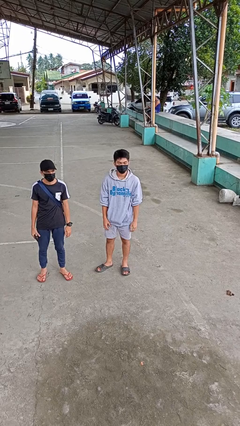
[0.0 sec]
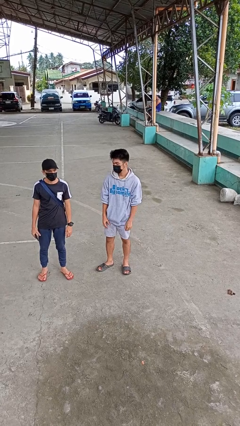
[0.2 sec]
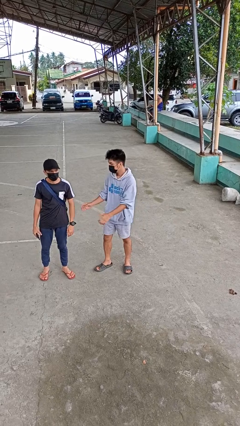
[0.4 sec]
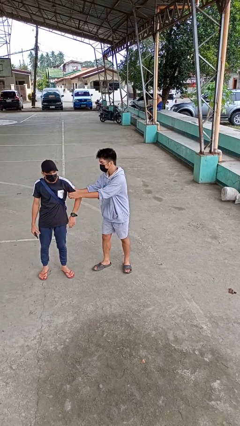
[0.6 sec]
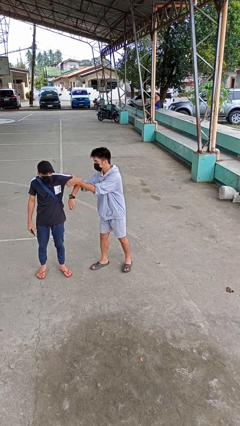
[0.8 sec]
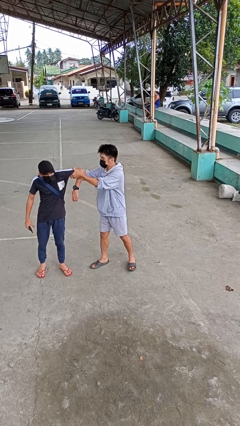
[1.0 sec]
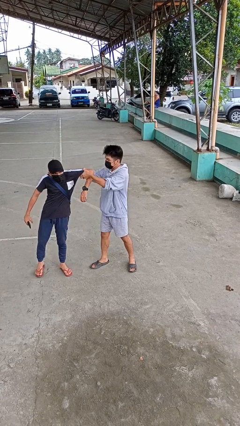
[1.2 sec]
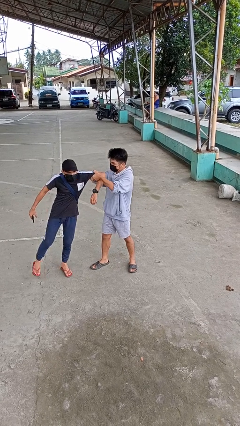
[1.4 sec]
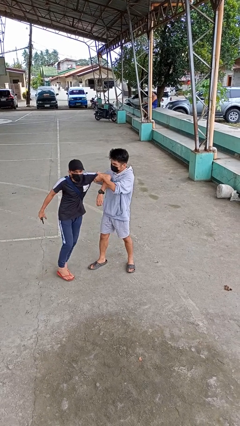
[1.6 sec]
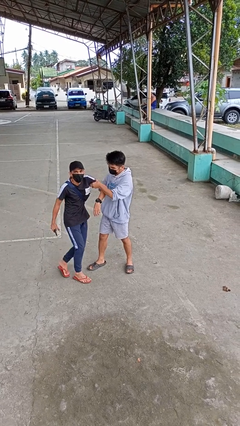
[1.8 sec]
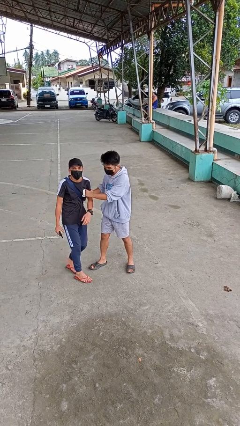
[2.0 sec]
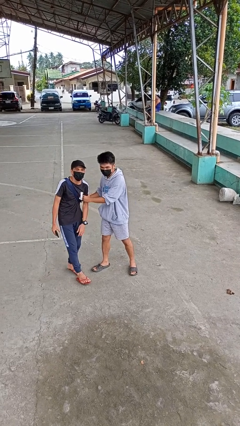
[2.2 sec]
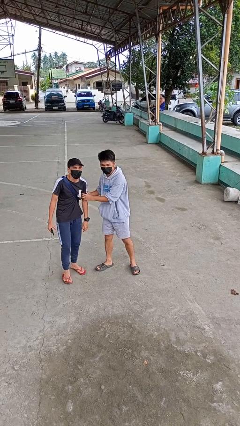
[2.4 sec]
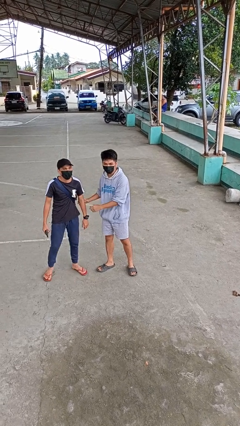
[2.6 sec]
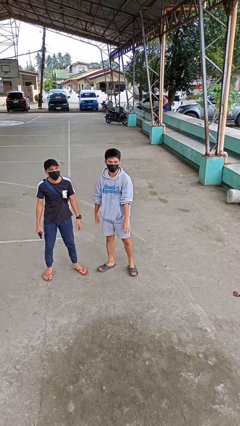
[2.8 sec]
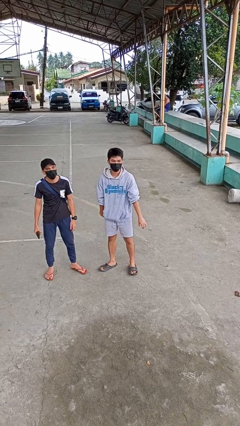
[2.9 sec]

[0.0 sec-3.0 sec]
person grabs person by bicep

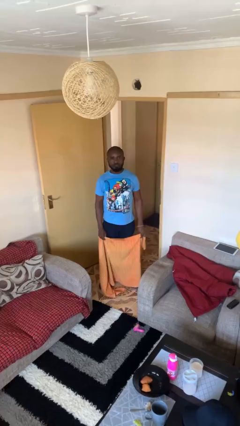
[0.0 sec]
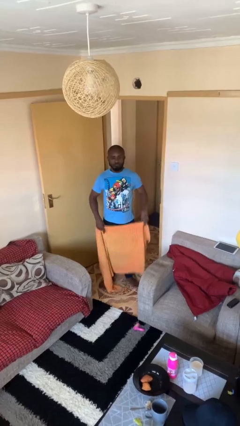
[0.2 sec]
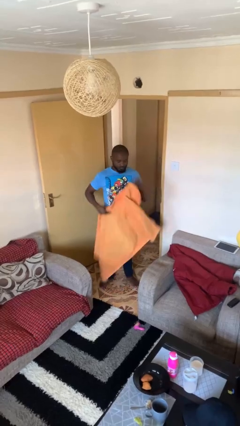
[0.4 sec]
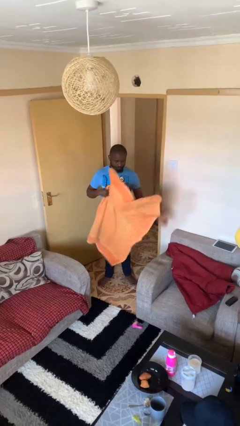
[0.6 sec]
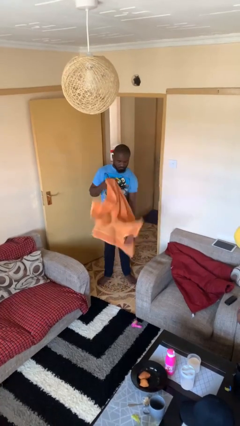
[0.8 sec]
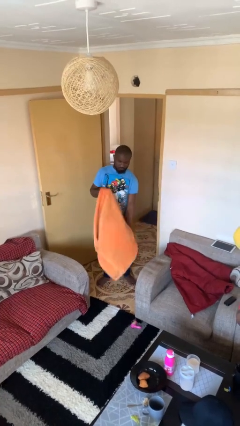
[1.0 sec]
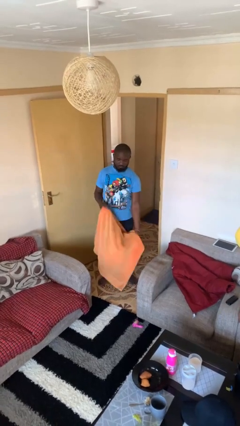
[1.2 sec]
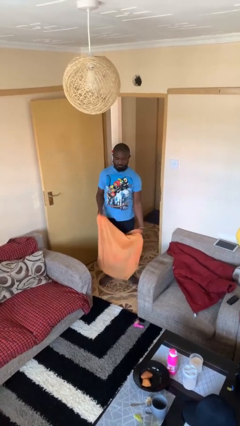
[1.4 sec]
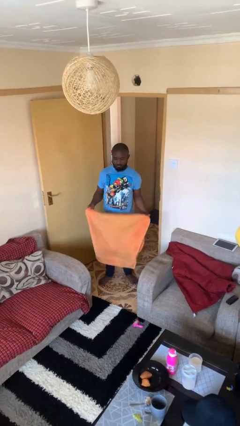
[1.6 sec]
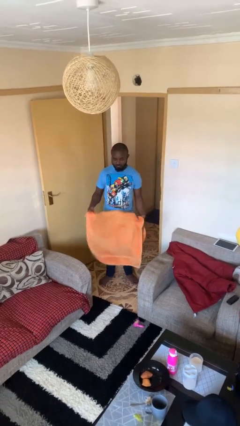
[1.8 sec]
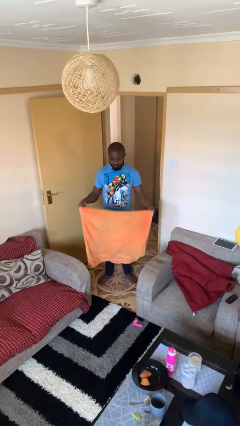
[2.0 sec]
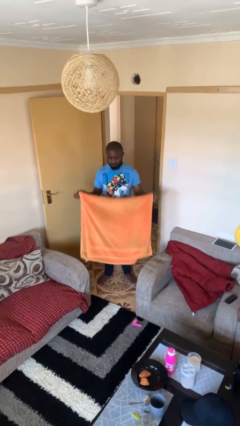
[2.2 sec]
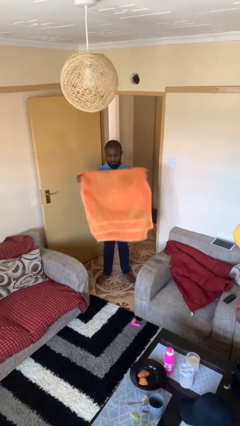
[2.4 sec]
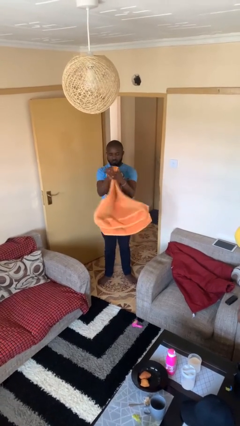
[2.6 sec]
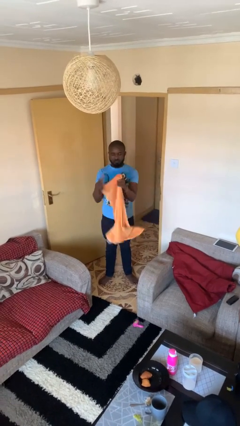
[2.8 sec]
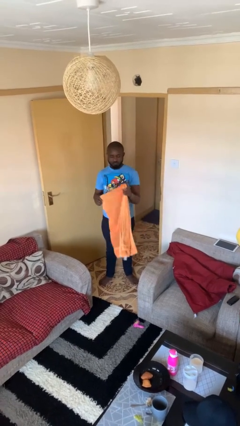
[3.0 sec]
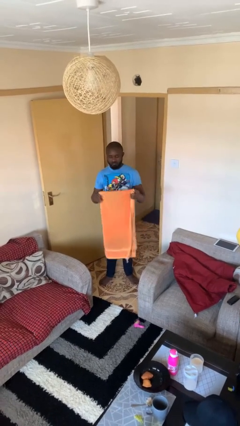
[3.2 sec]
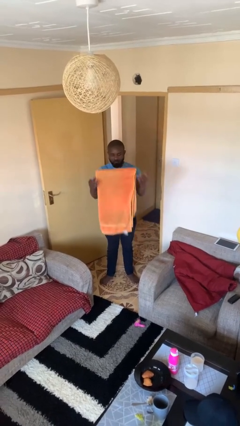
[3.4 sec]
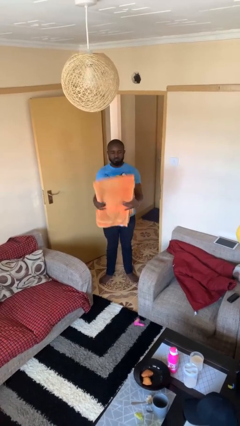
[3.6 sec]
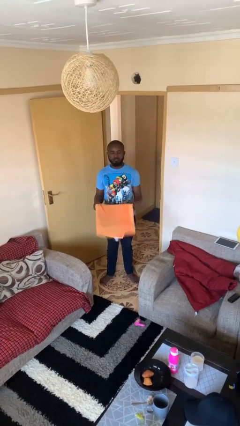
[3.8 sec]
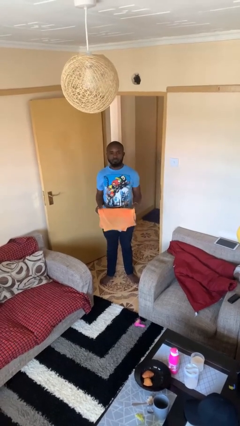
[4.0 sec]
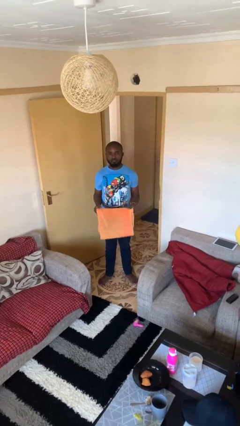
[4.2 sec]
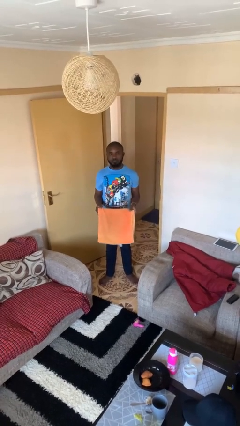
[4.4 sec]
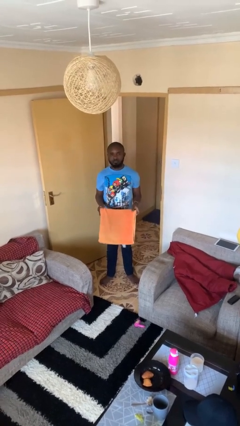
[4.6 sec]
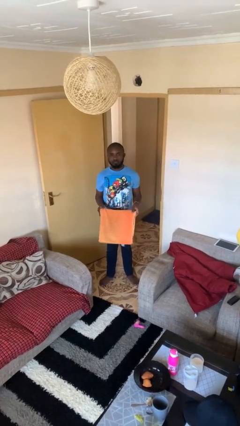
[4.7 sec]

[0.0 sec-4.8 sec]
person folds towel

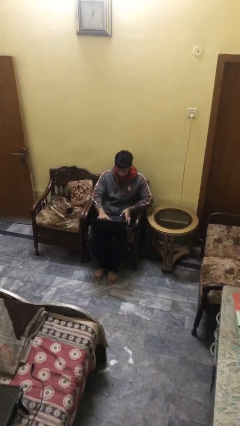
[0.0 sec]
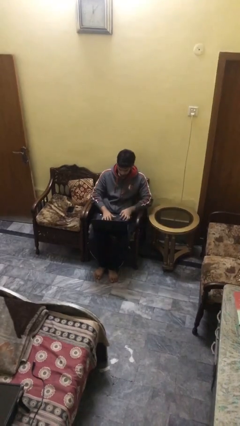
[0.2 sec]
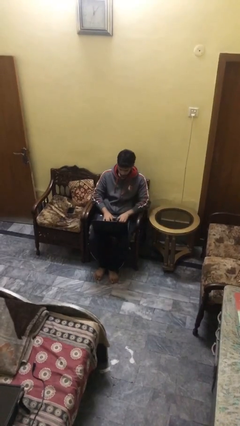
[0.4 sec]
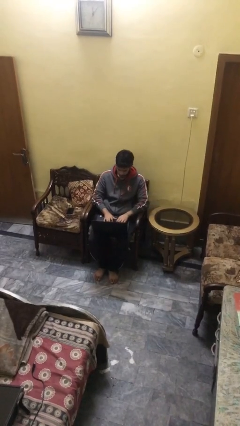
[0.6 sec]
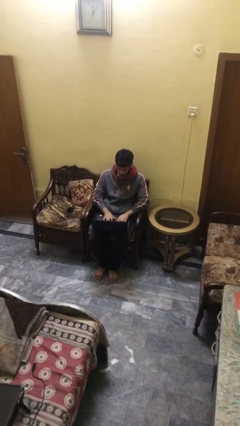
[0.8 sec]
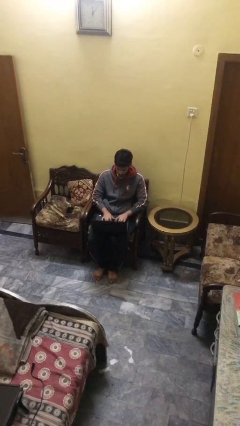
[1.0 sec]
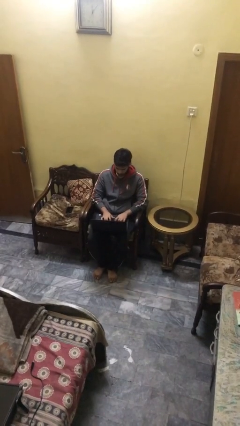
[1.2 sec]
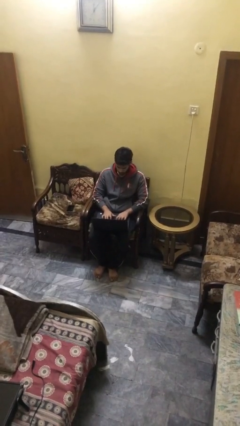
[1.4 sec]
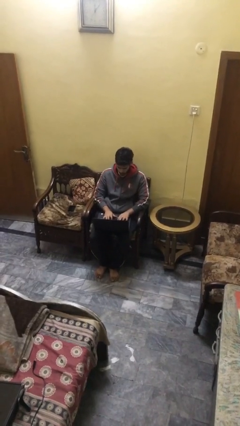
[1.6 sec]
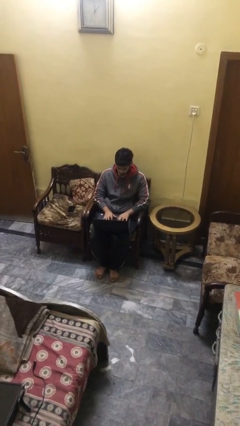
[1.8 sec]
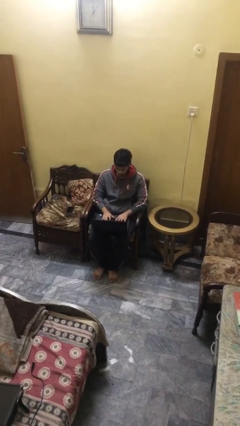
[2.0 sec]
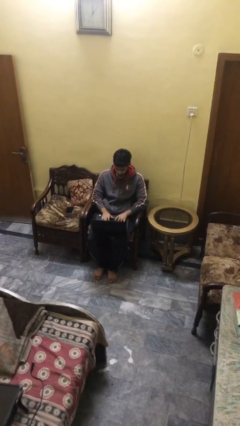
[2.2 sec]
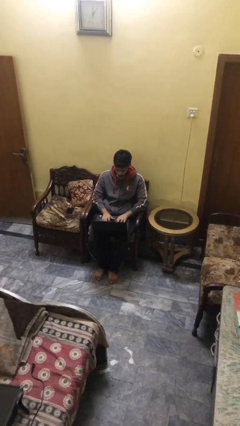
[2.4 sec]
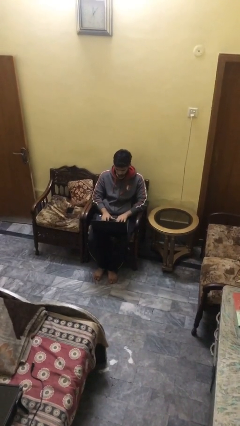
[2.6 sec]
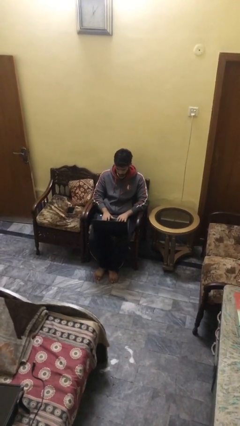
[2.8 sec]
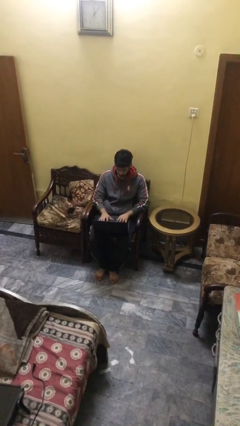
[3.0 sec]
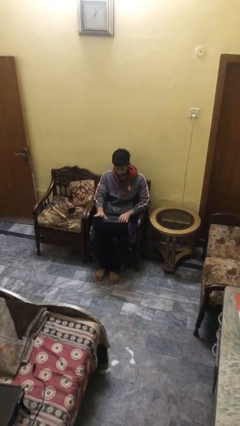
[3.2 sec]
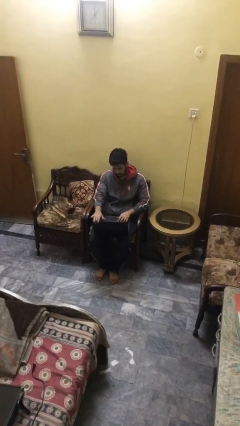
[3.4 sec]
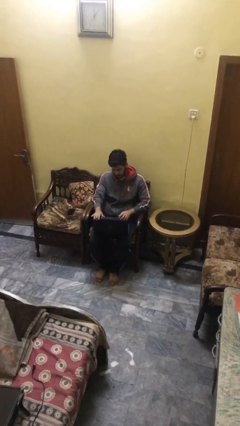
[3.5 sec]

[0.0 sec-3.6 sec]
person interacts with laptop

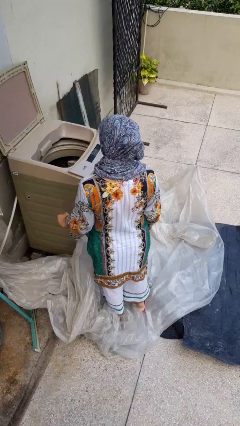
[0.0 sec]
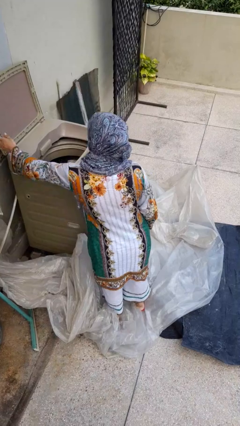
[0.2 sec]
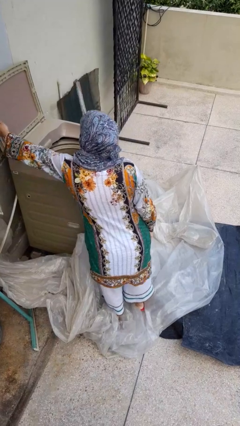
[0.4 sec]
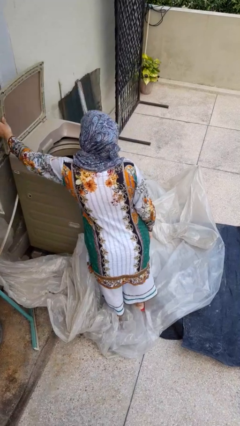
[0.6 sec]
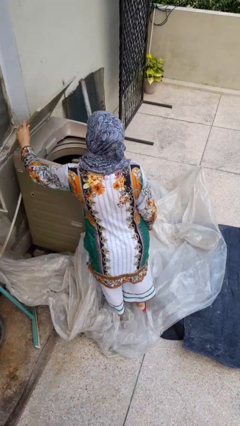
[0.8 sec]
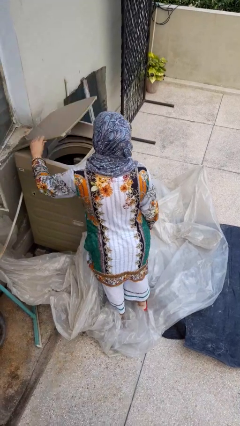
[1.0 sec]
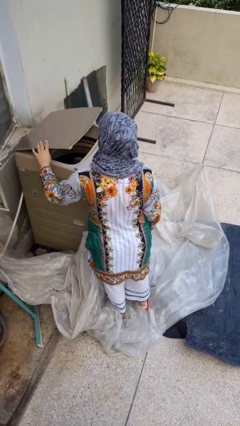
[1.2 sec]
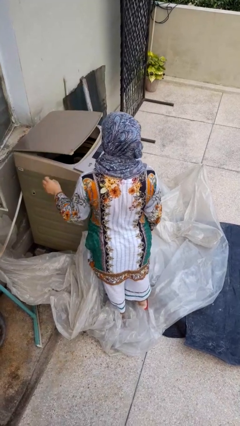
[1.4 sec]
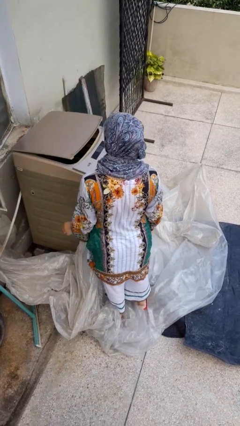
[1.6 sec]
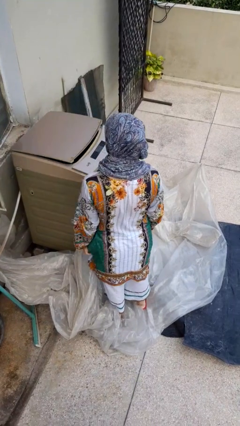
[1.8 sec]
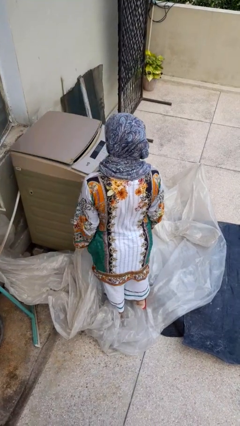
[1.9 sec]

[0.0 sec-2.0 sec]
person closes clothes washer

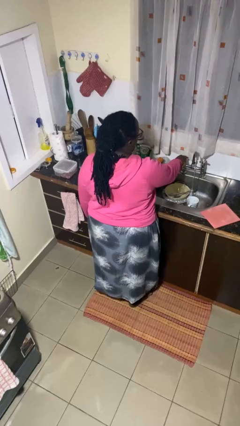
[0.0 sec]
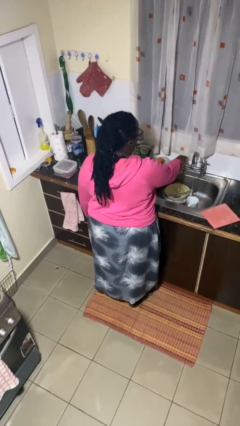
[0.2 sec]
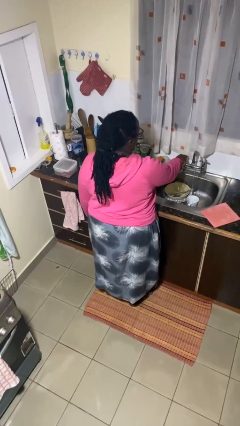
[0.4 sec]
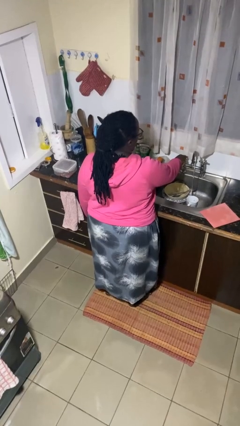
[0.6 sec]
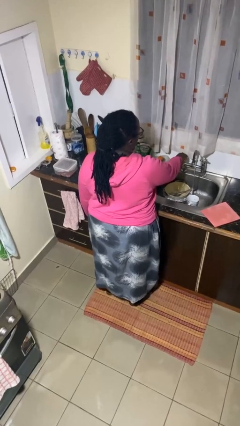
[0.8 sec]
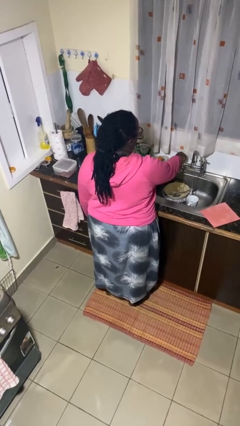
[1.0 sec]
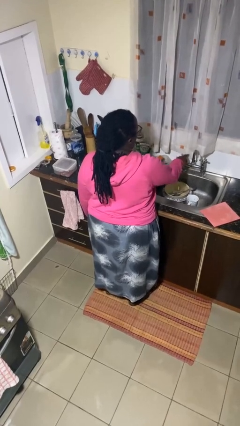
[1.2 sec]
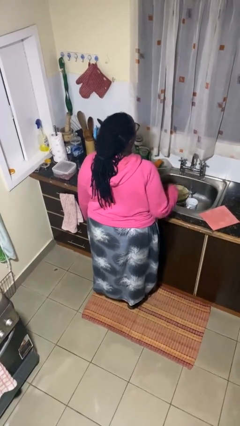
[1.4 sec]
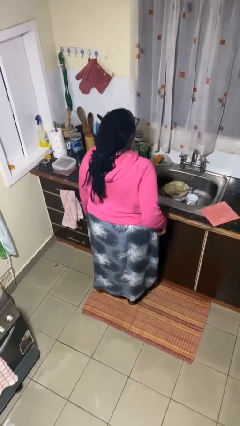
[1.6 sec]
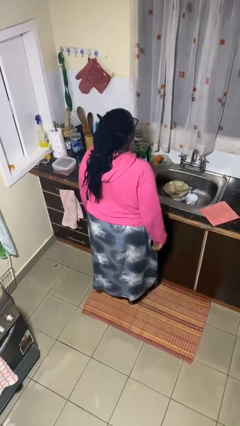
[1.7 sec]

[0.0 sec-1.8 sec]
person turns off faucet

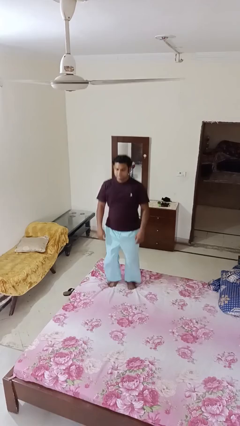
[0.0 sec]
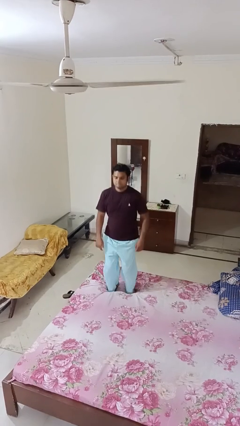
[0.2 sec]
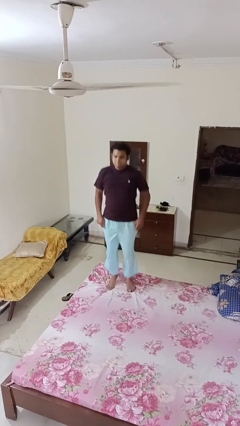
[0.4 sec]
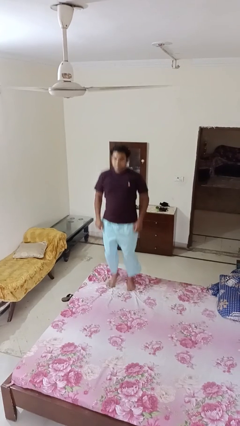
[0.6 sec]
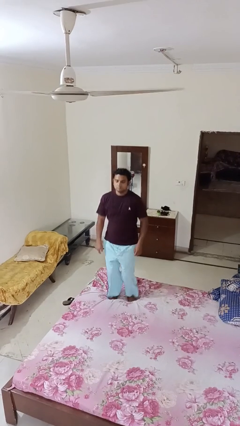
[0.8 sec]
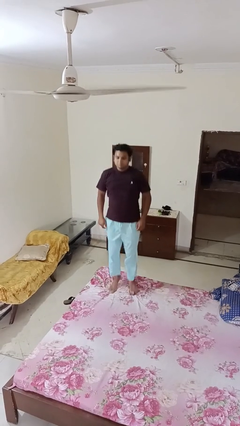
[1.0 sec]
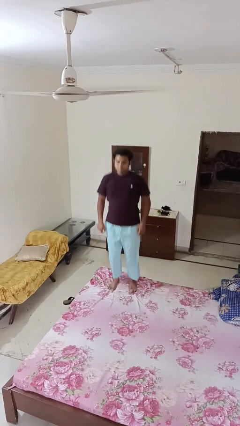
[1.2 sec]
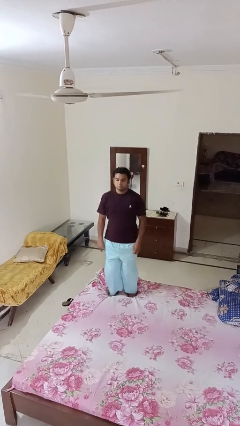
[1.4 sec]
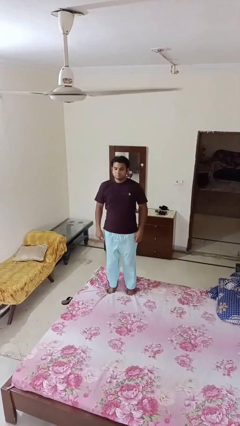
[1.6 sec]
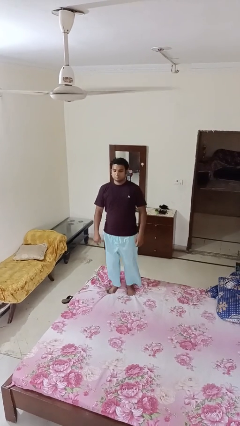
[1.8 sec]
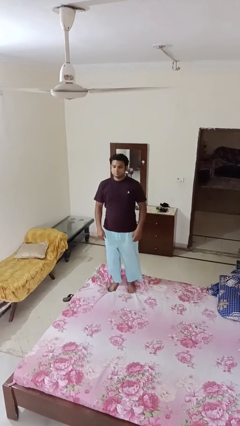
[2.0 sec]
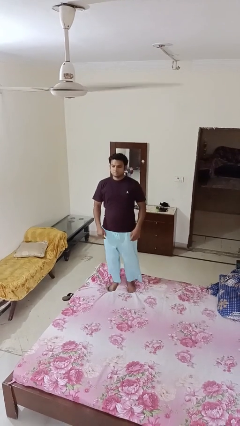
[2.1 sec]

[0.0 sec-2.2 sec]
person jumps on bed

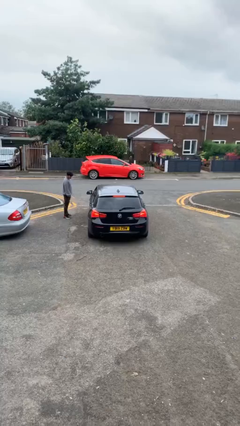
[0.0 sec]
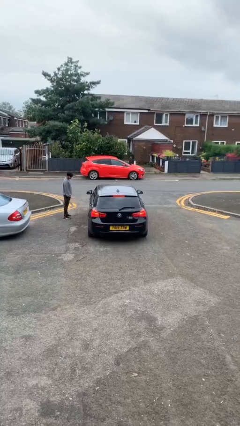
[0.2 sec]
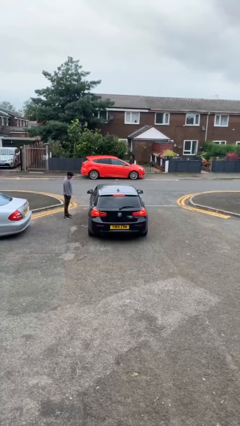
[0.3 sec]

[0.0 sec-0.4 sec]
car picks up person
